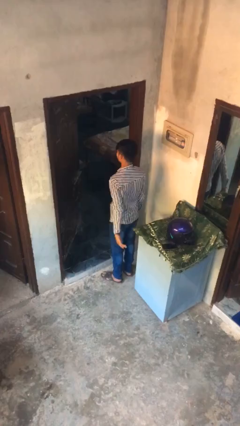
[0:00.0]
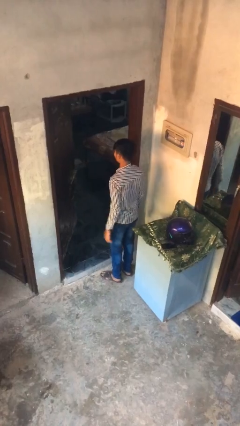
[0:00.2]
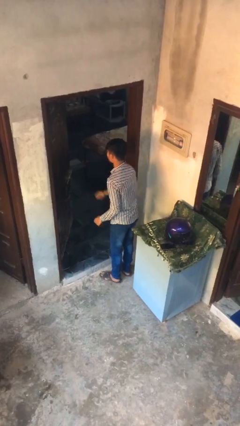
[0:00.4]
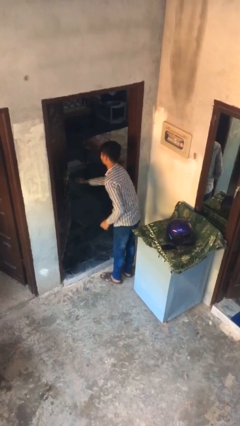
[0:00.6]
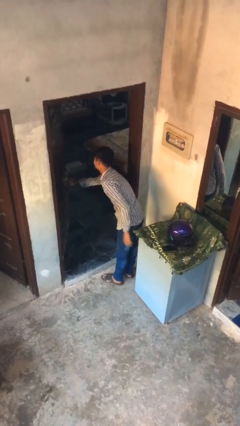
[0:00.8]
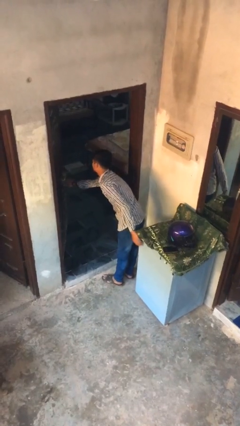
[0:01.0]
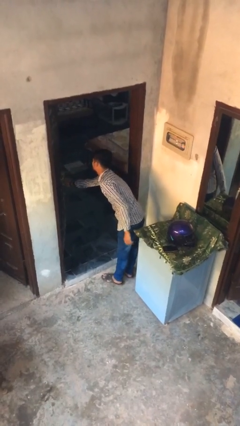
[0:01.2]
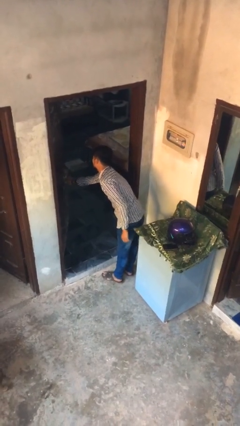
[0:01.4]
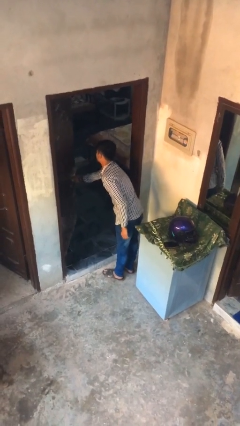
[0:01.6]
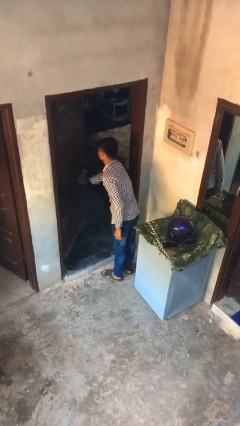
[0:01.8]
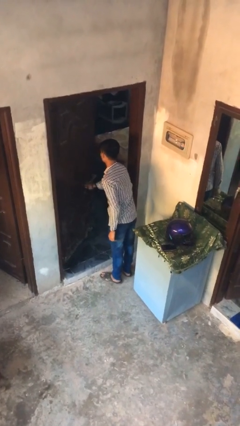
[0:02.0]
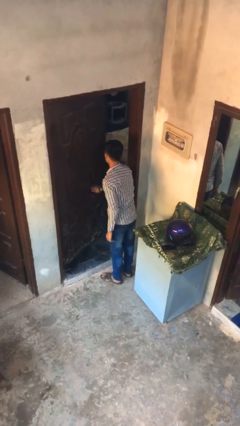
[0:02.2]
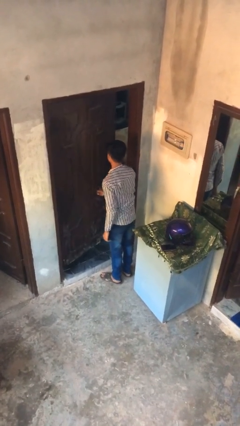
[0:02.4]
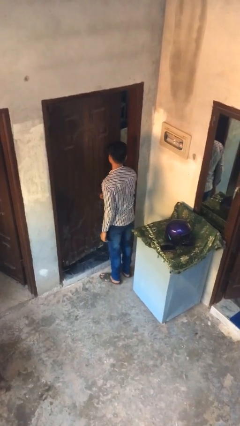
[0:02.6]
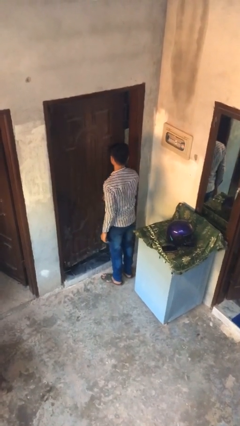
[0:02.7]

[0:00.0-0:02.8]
person closes facility door

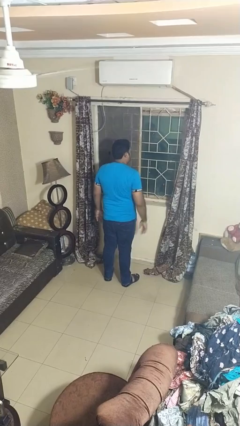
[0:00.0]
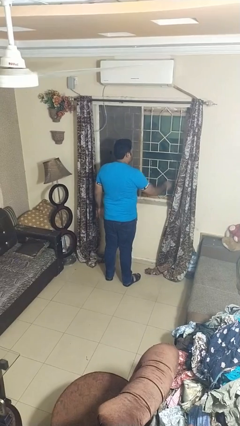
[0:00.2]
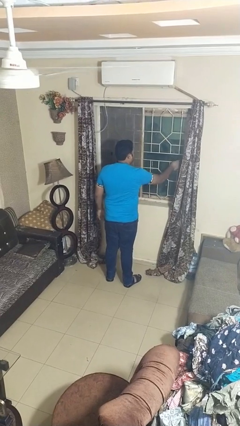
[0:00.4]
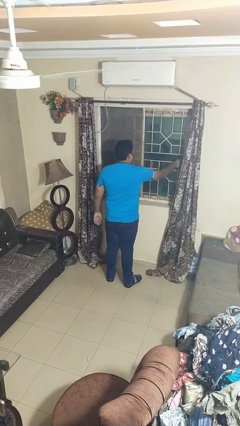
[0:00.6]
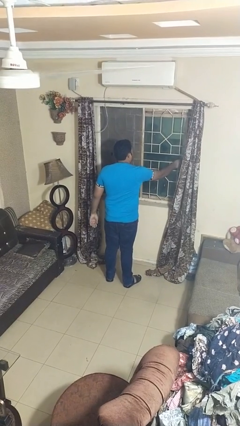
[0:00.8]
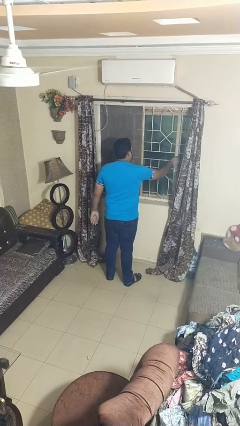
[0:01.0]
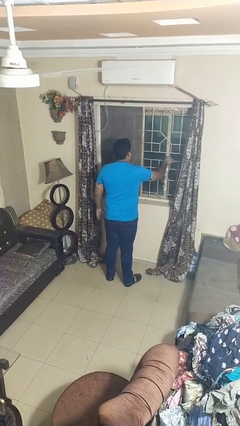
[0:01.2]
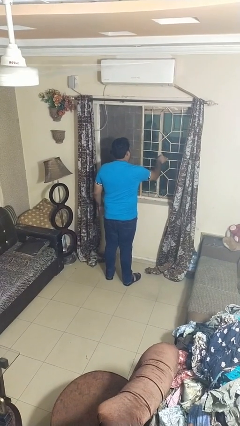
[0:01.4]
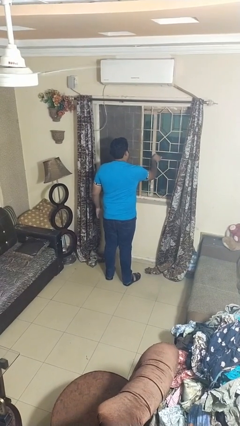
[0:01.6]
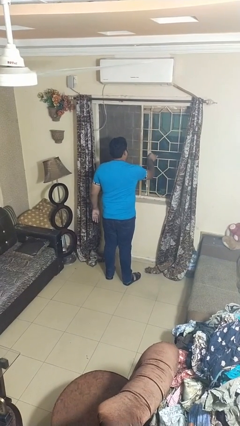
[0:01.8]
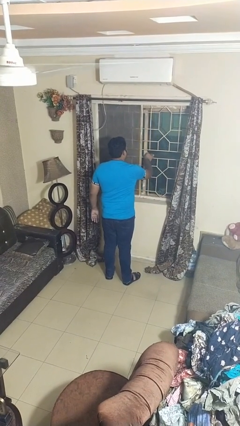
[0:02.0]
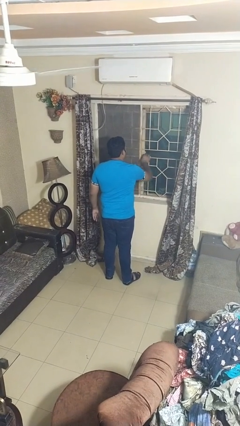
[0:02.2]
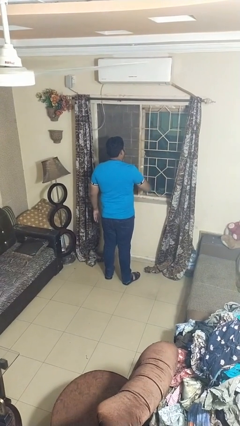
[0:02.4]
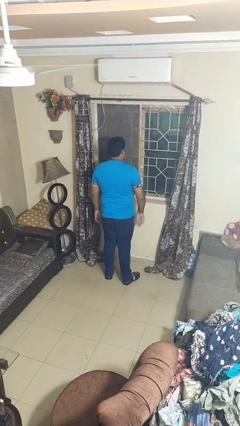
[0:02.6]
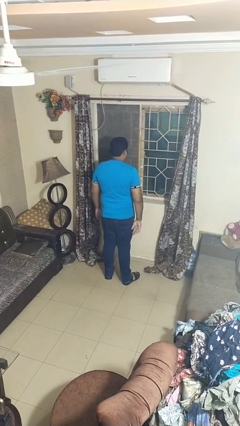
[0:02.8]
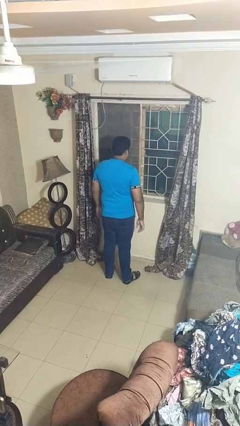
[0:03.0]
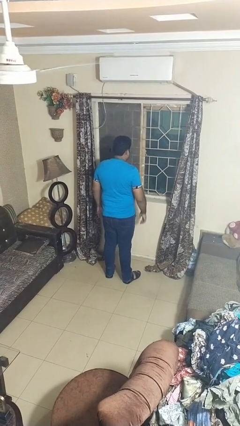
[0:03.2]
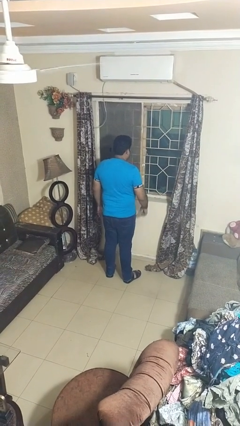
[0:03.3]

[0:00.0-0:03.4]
person closes home window

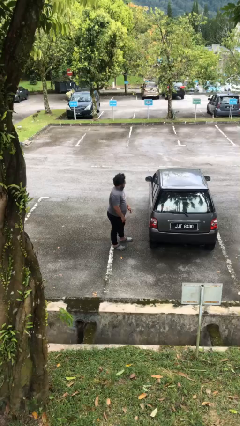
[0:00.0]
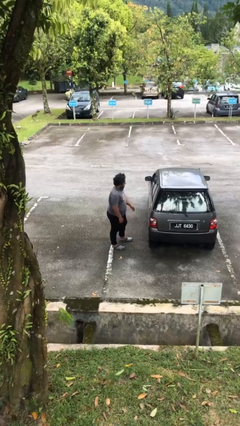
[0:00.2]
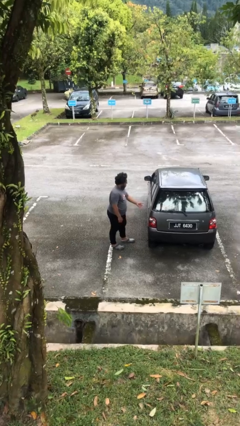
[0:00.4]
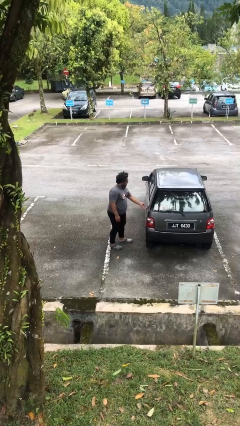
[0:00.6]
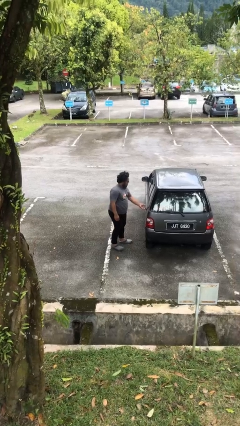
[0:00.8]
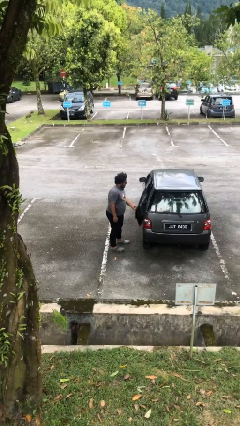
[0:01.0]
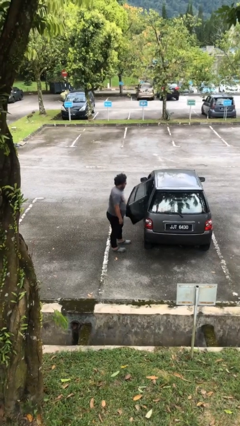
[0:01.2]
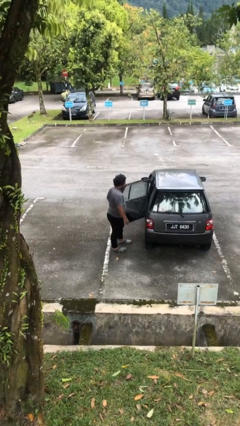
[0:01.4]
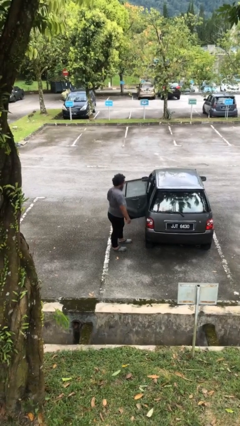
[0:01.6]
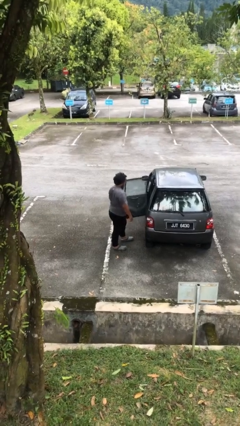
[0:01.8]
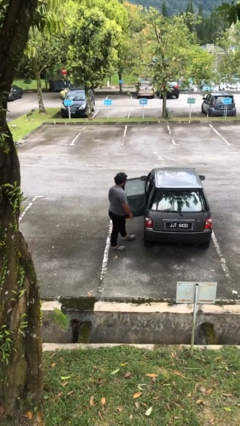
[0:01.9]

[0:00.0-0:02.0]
person opens car door

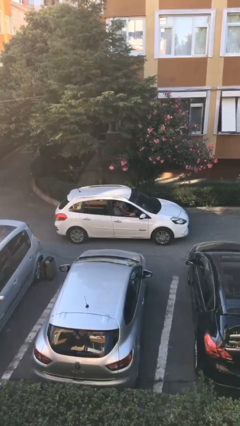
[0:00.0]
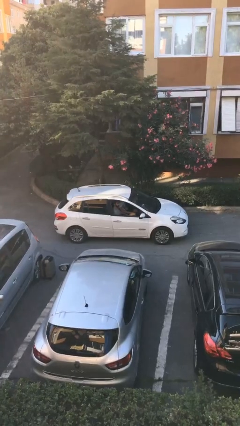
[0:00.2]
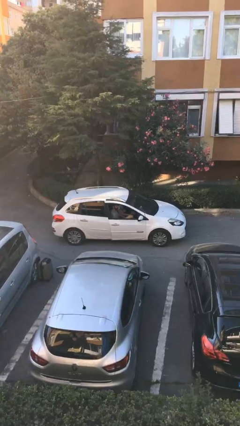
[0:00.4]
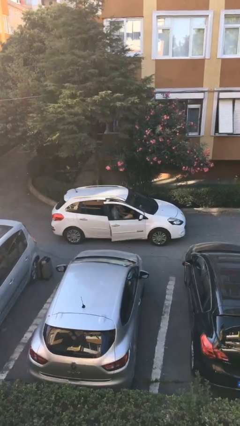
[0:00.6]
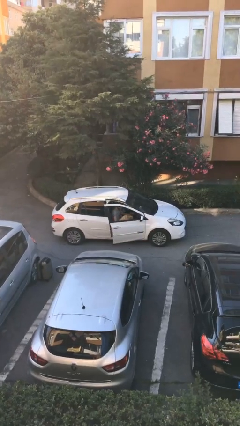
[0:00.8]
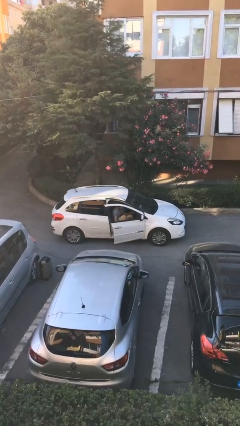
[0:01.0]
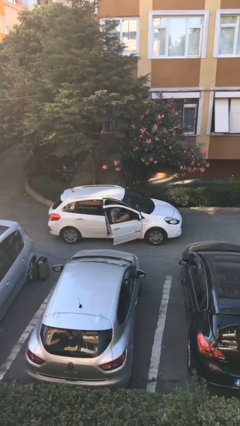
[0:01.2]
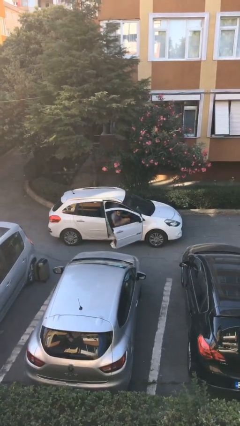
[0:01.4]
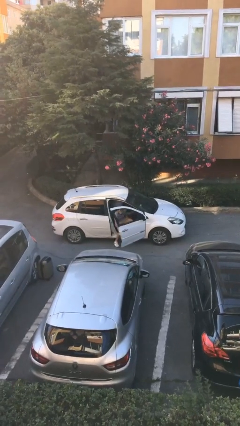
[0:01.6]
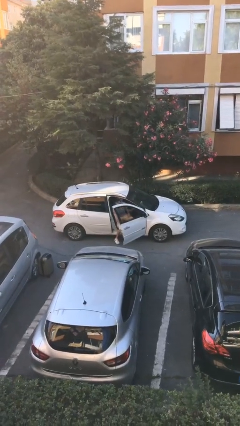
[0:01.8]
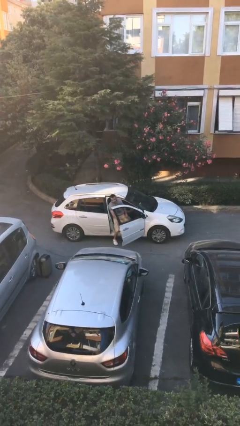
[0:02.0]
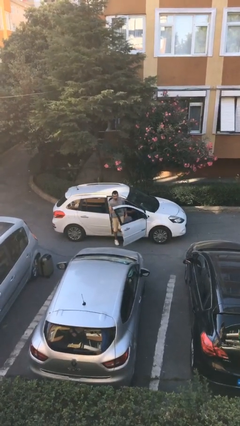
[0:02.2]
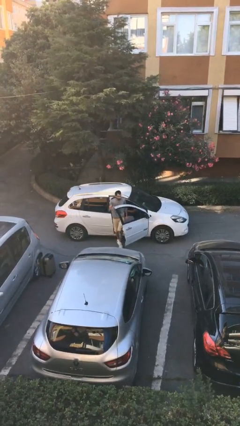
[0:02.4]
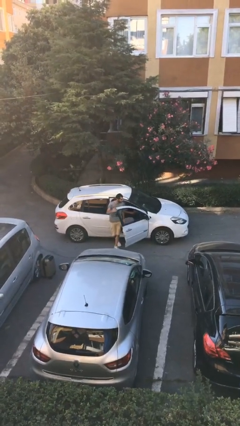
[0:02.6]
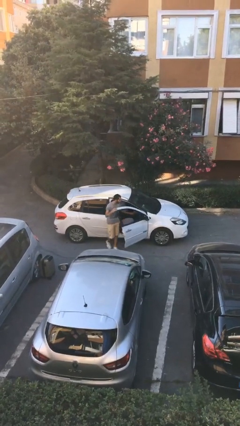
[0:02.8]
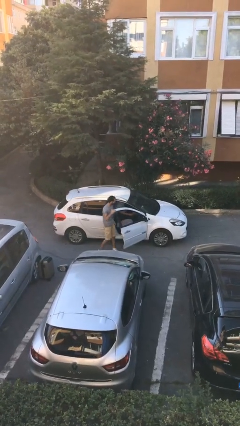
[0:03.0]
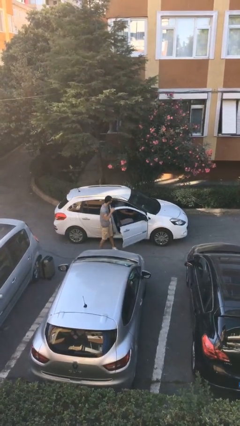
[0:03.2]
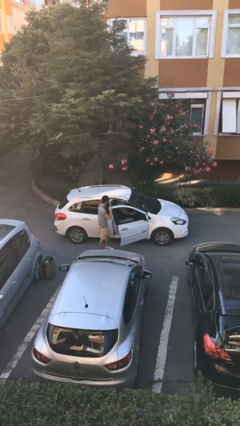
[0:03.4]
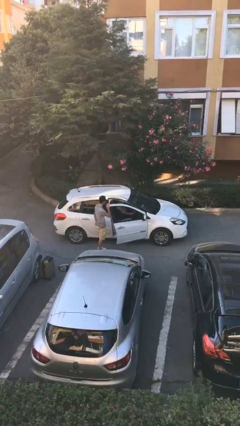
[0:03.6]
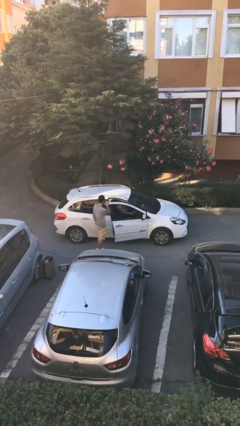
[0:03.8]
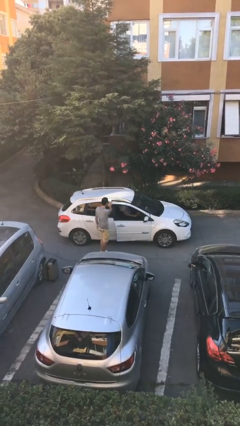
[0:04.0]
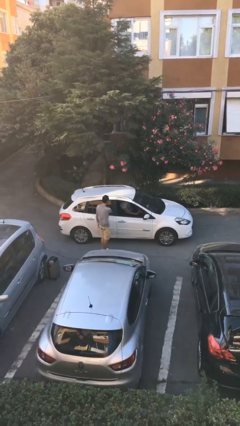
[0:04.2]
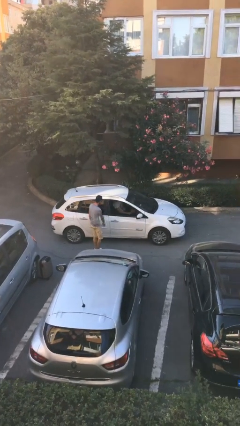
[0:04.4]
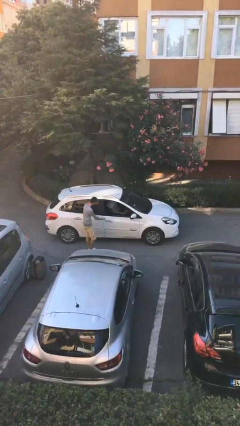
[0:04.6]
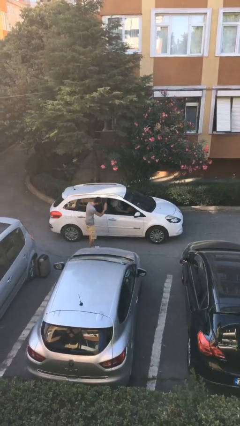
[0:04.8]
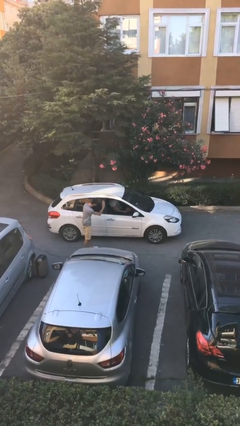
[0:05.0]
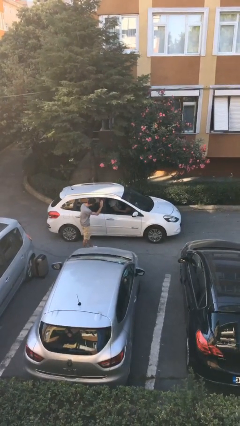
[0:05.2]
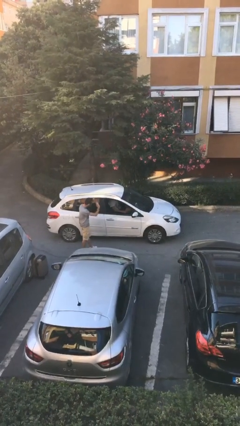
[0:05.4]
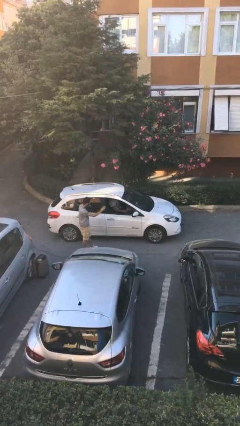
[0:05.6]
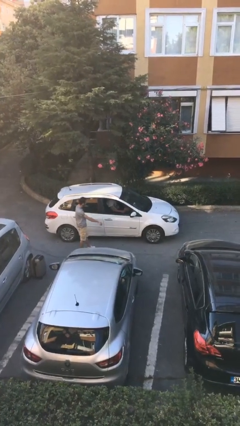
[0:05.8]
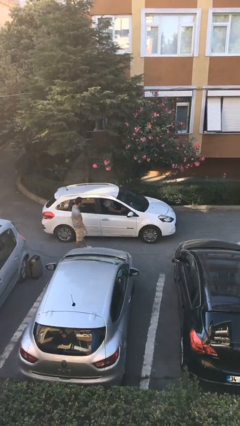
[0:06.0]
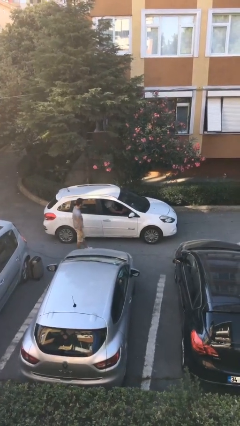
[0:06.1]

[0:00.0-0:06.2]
car drops off person

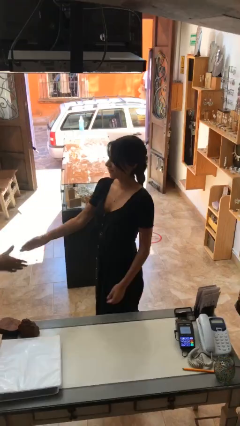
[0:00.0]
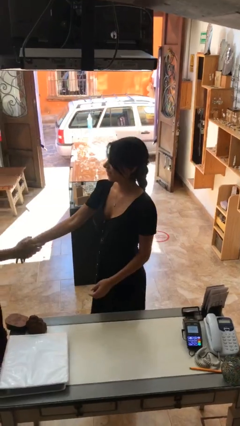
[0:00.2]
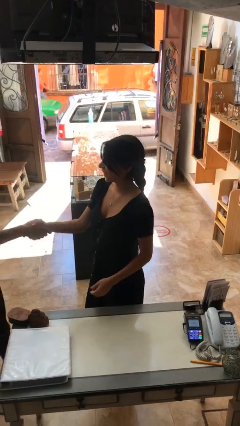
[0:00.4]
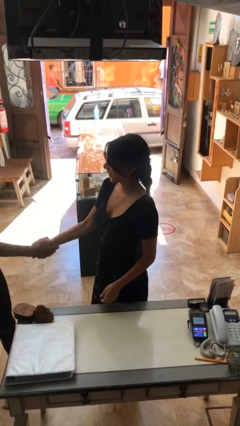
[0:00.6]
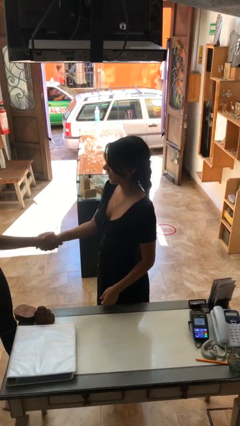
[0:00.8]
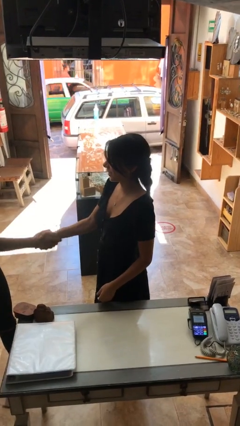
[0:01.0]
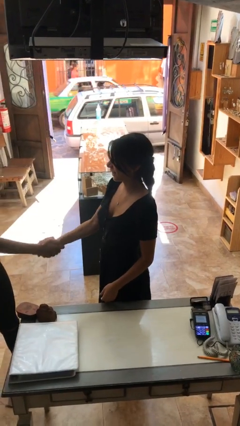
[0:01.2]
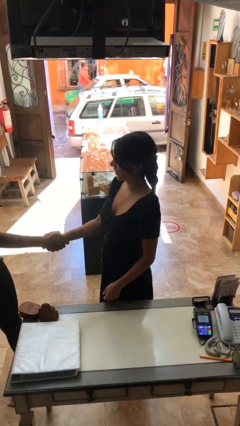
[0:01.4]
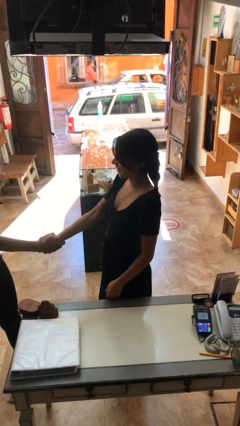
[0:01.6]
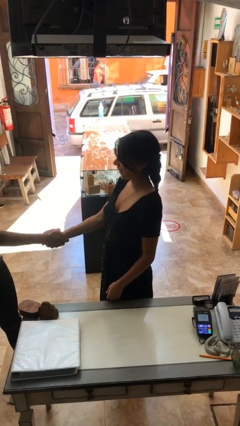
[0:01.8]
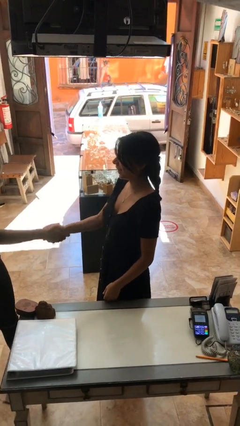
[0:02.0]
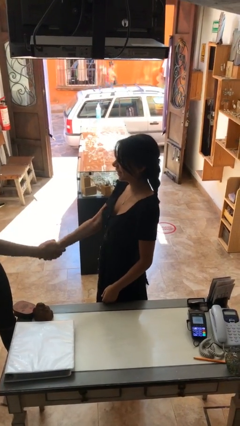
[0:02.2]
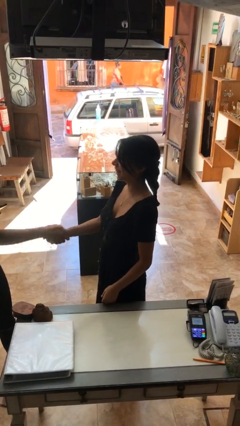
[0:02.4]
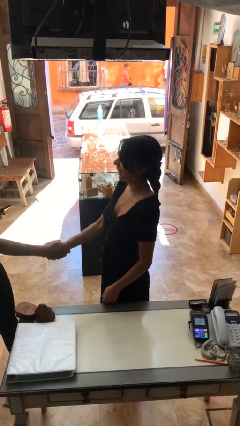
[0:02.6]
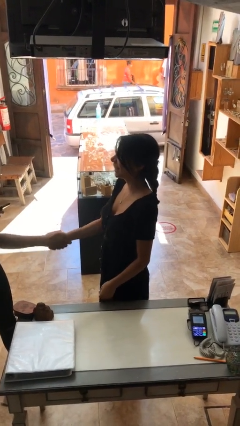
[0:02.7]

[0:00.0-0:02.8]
person shakes hand

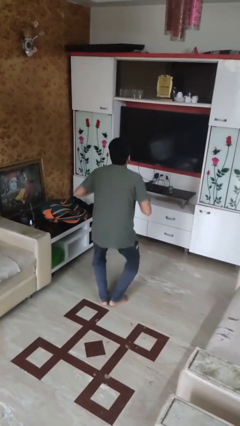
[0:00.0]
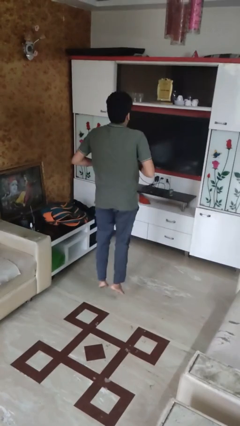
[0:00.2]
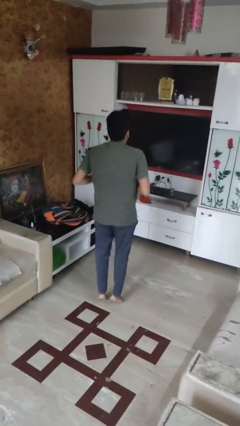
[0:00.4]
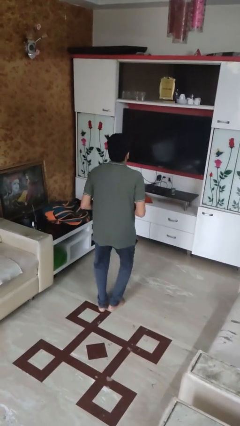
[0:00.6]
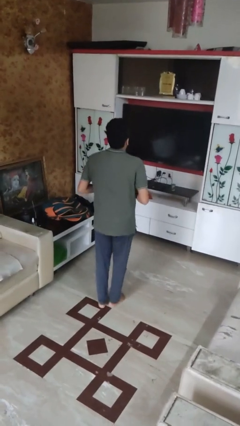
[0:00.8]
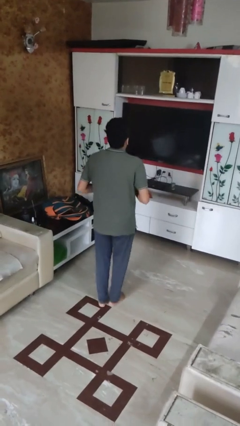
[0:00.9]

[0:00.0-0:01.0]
person jumps
